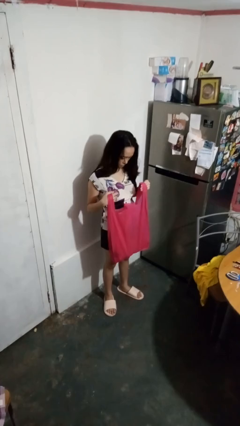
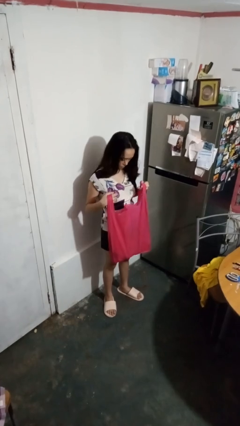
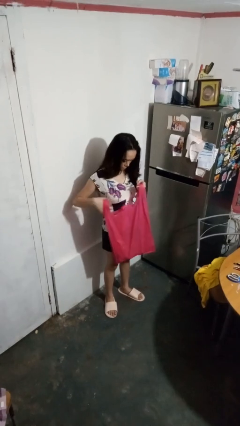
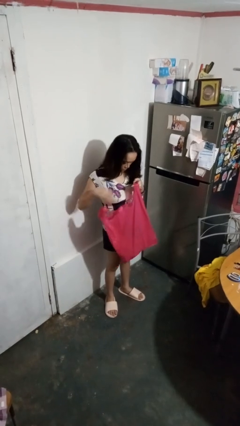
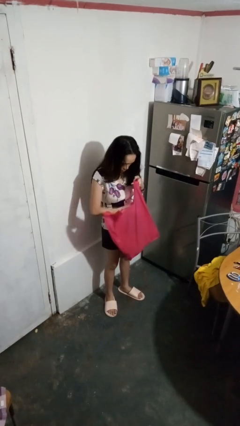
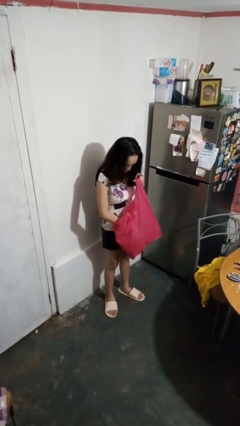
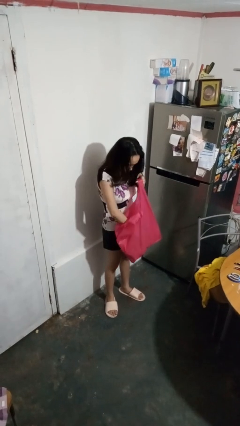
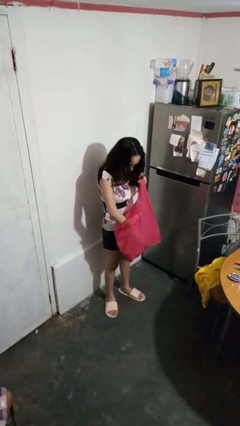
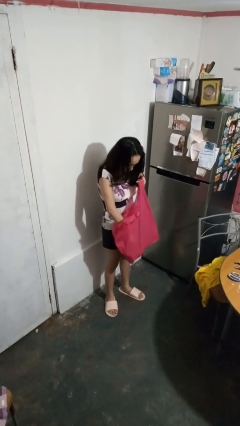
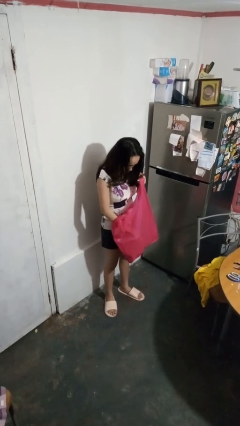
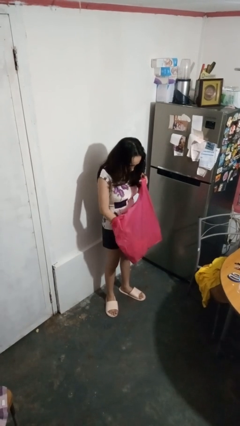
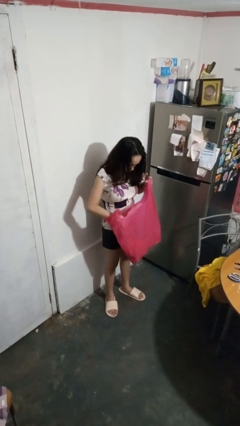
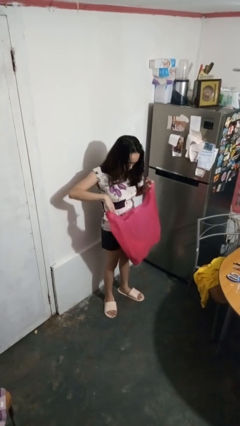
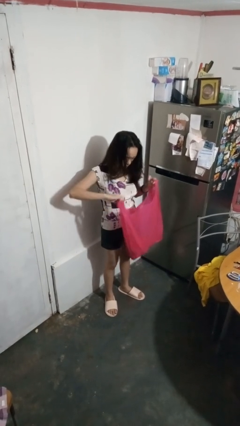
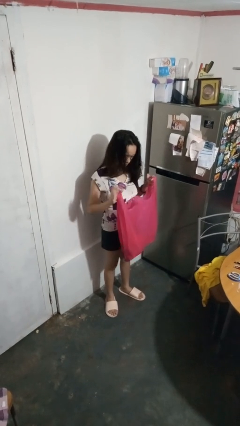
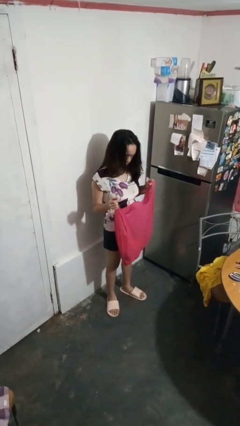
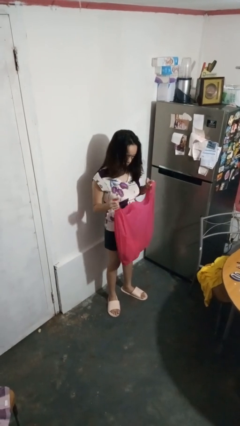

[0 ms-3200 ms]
person searches in box

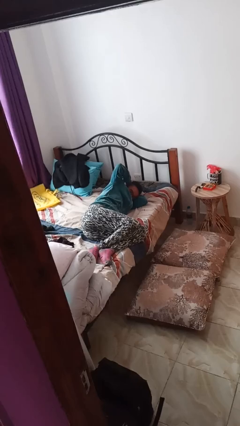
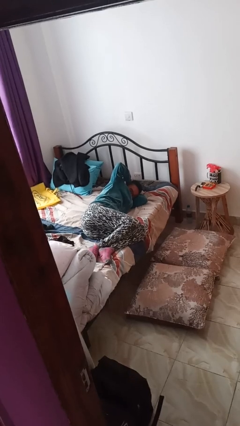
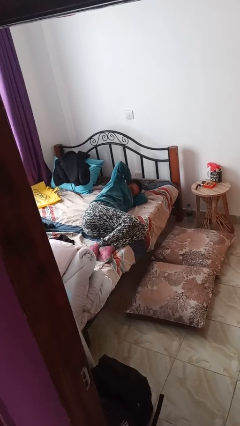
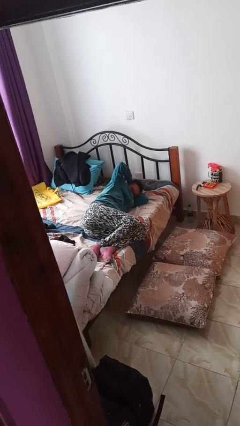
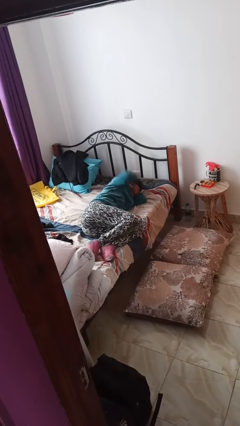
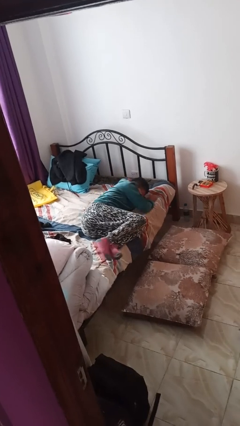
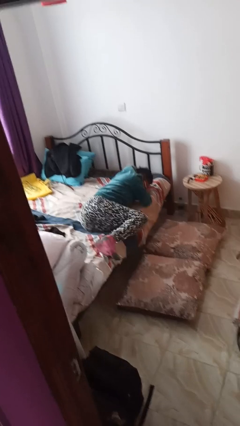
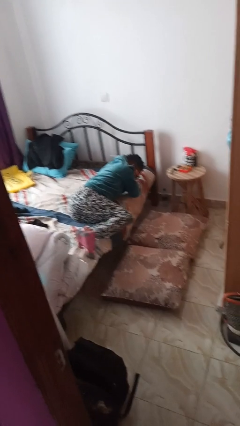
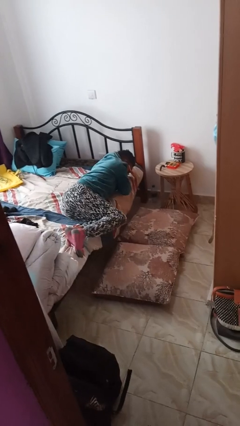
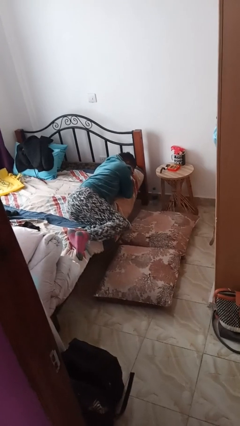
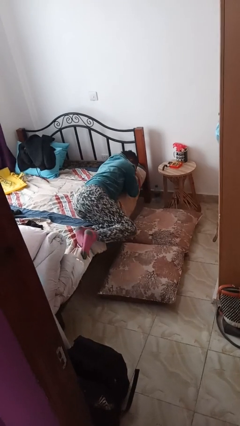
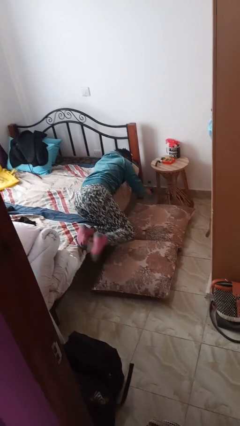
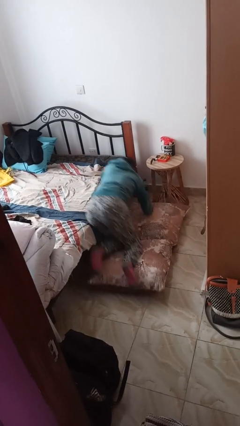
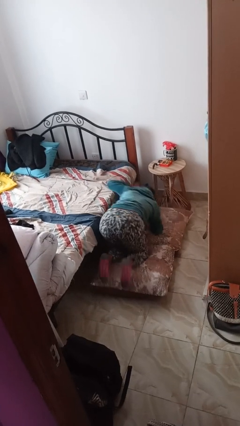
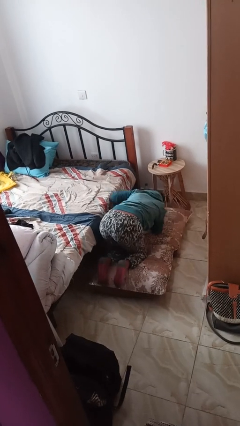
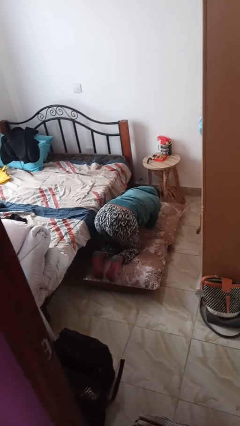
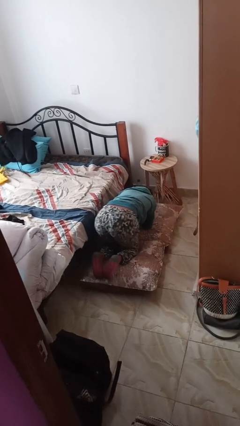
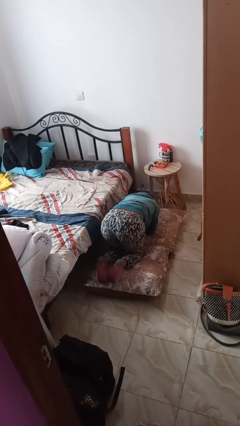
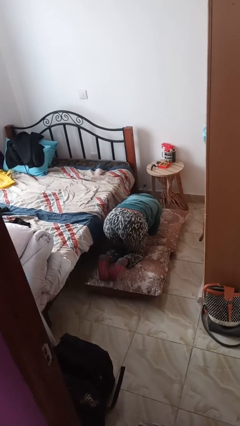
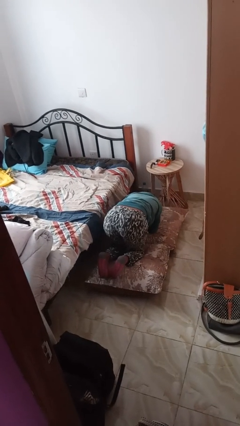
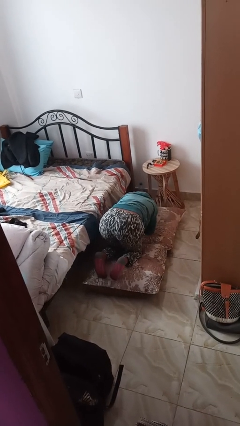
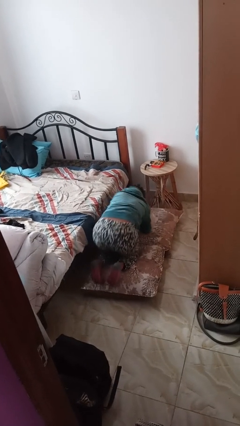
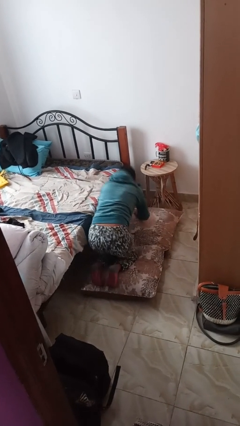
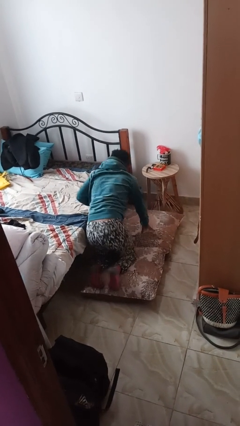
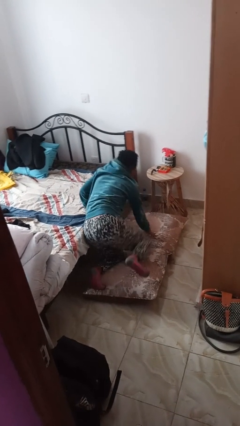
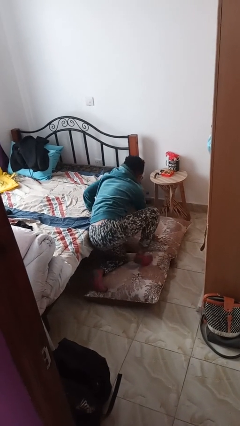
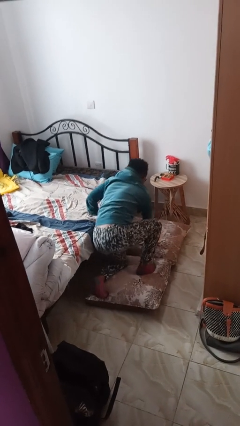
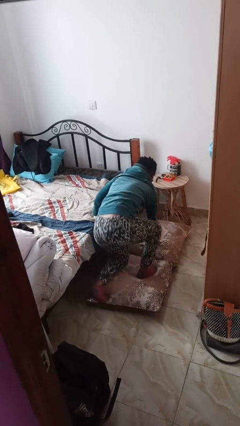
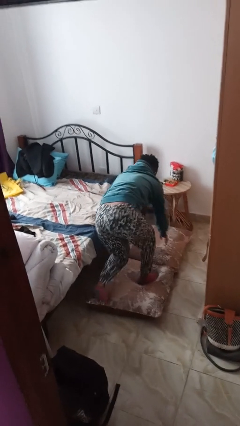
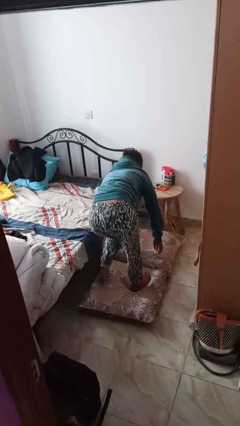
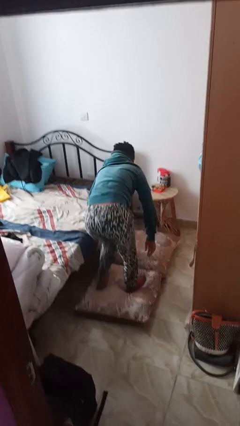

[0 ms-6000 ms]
person falls from bed

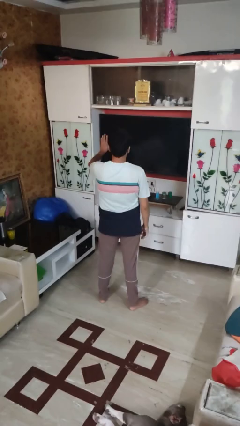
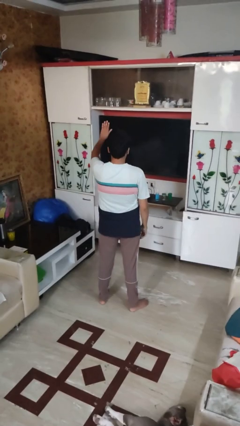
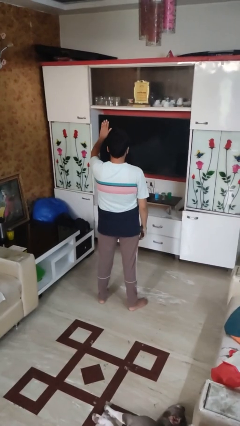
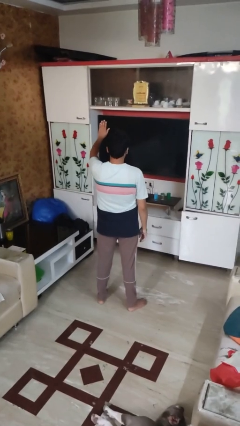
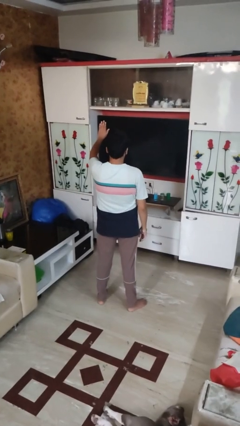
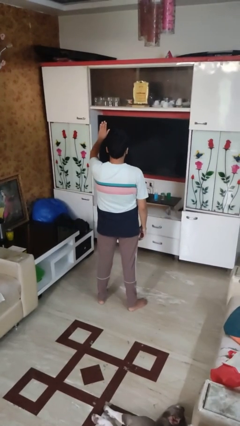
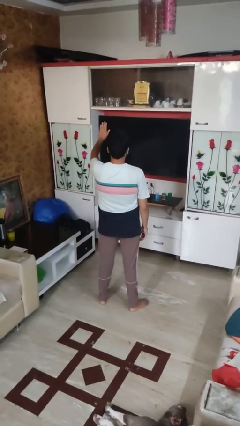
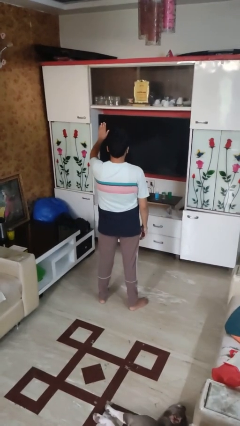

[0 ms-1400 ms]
person gestures stop

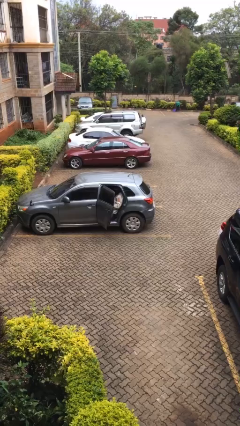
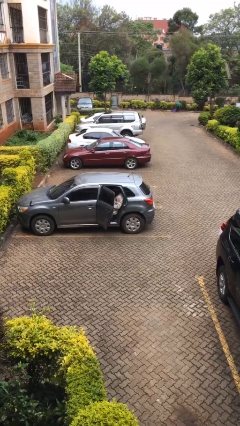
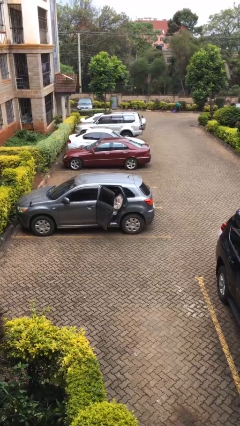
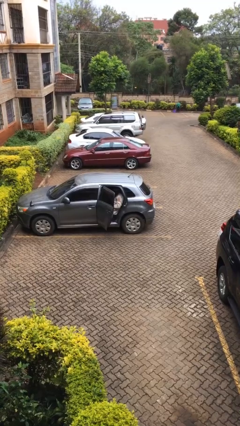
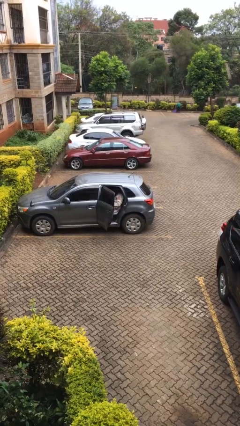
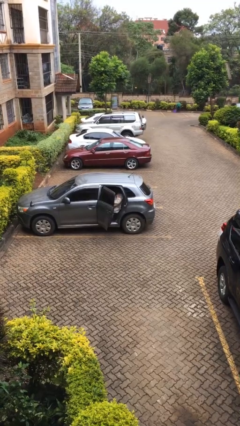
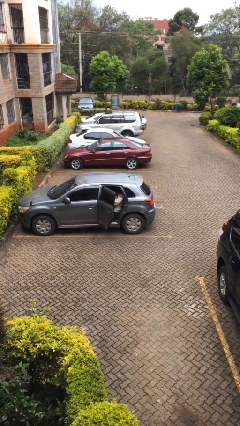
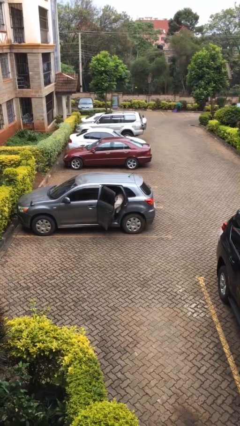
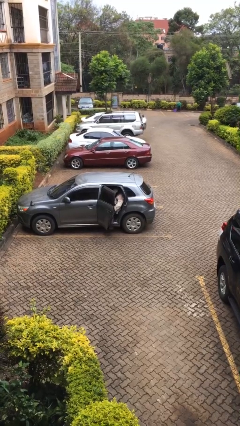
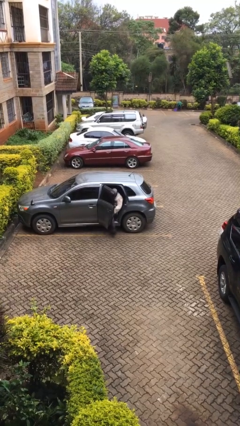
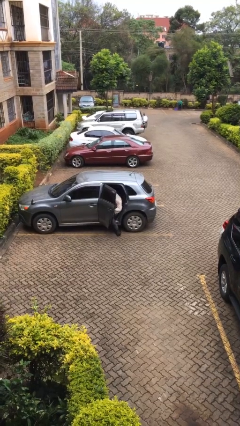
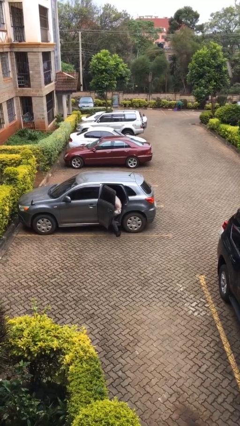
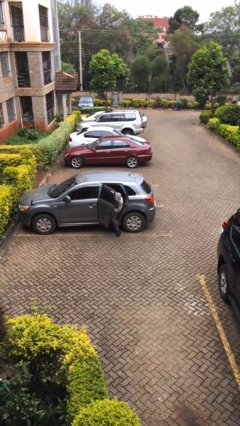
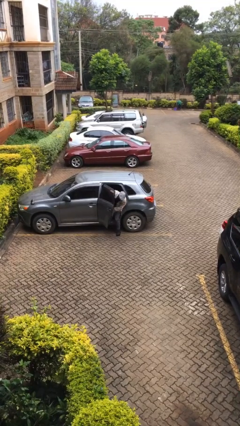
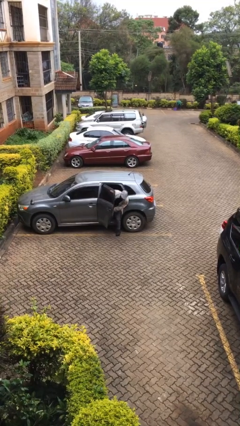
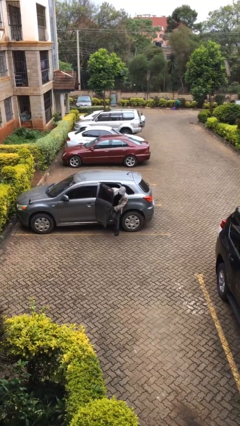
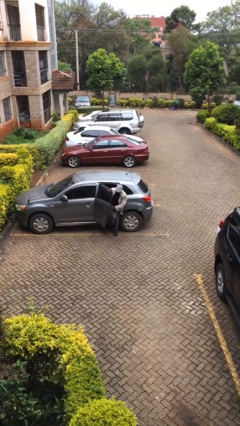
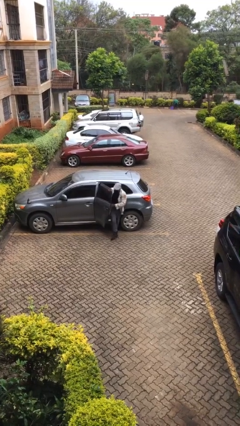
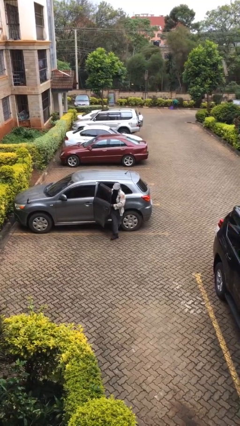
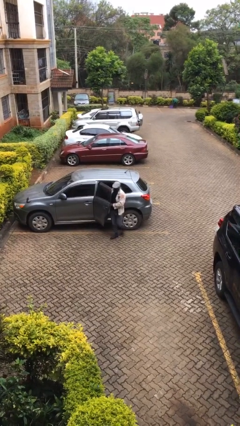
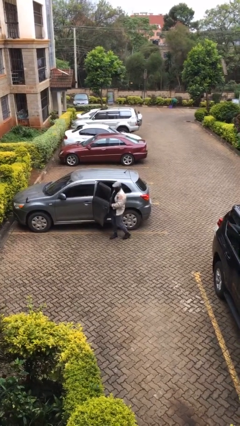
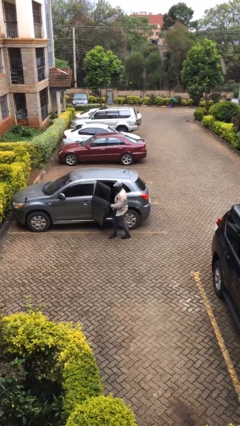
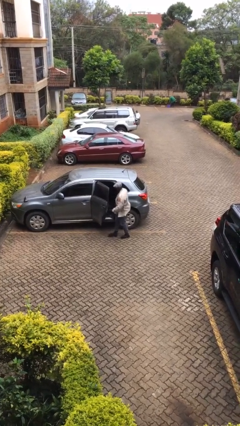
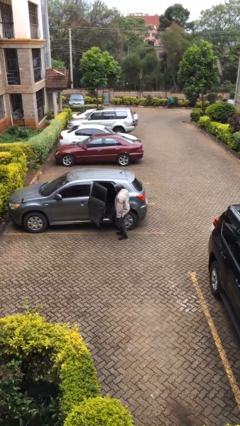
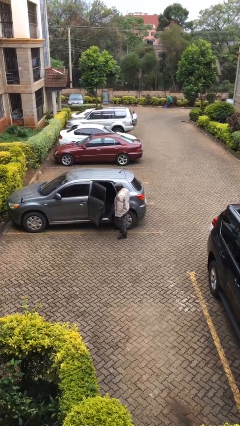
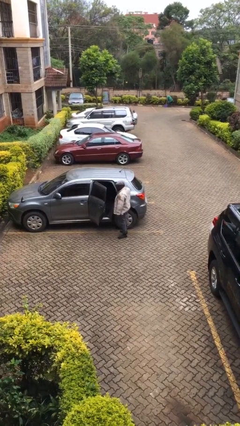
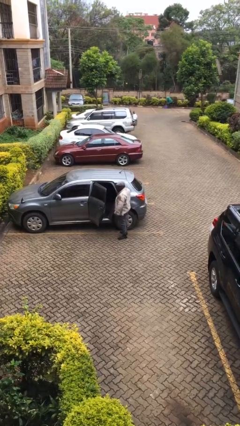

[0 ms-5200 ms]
person exits car

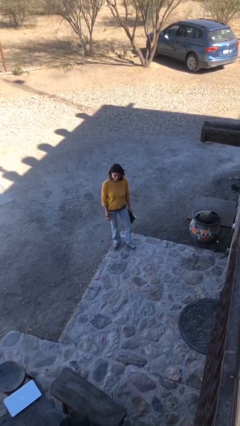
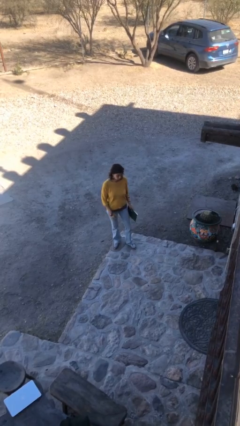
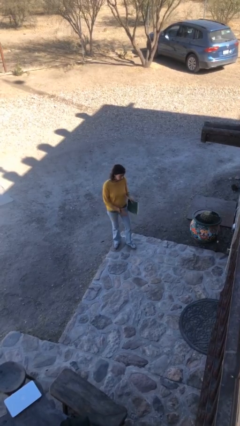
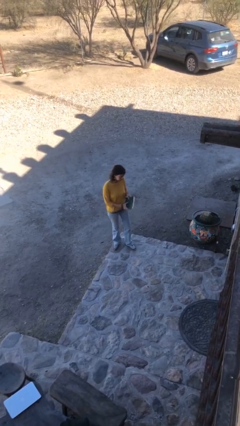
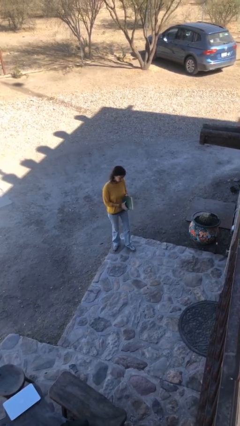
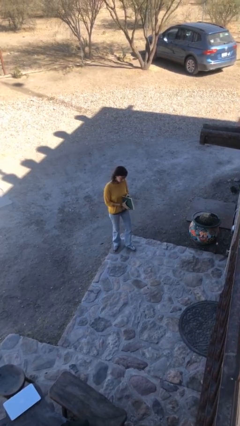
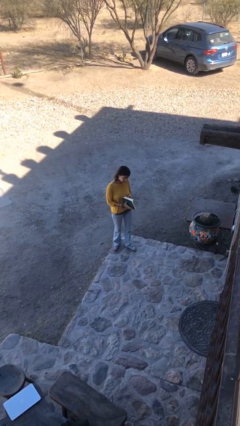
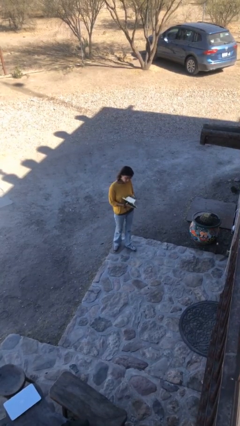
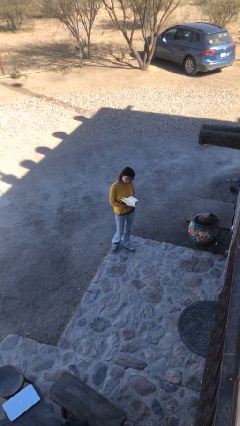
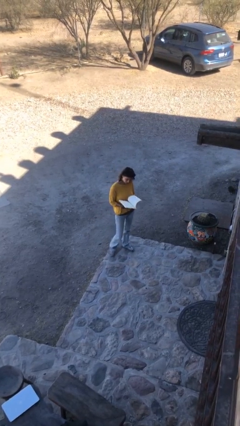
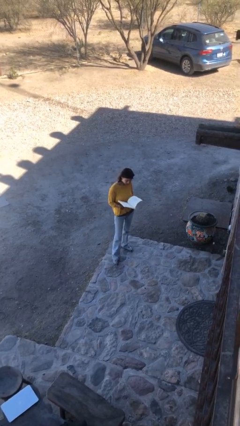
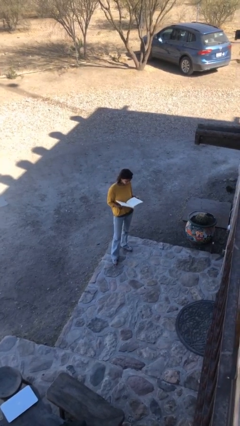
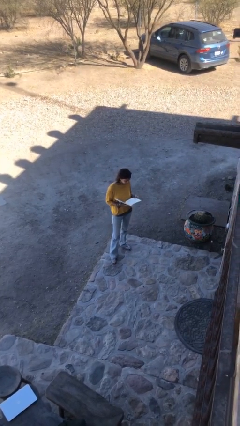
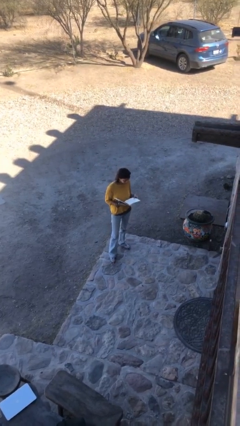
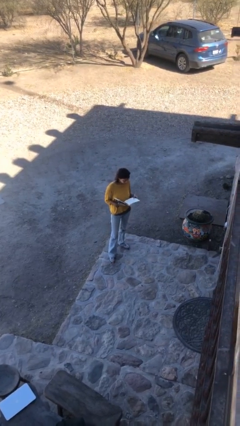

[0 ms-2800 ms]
person reads document
